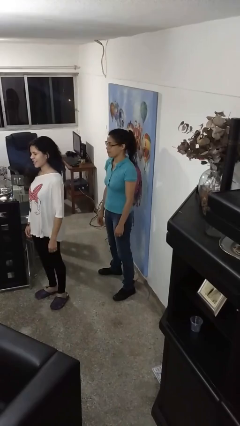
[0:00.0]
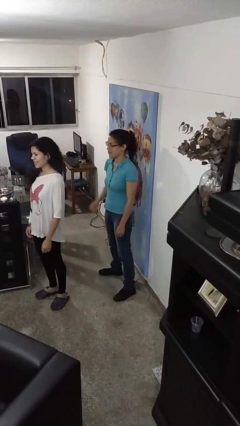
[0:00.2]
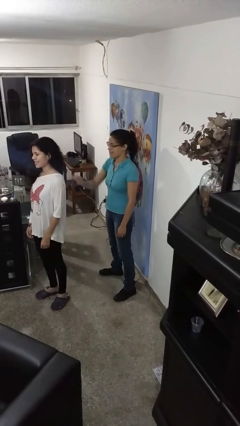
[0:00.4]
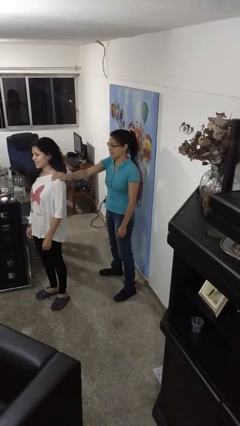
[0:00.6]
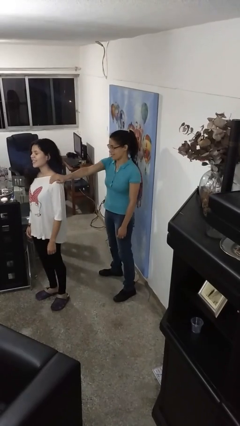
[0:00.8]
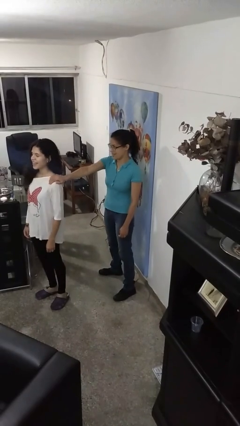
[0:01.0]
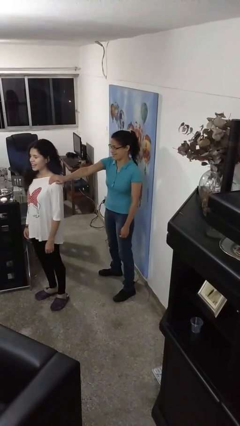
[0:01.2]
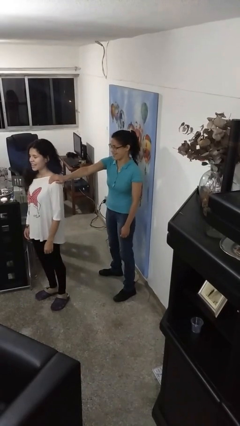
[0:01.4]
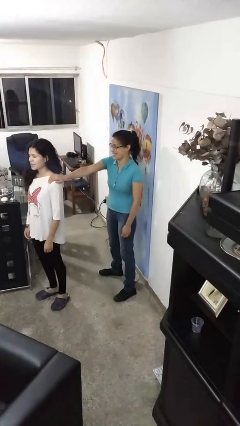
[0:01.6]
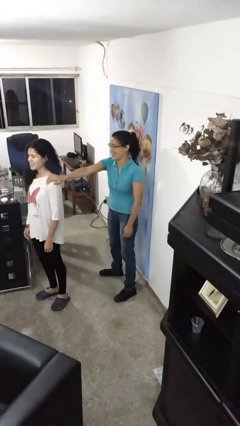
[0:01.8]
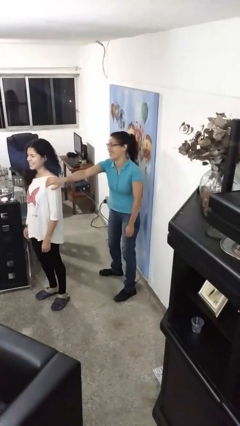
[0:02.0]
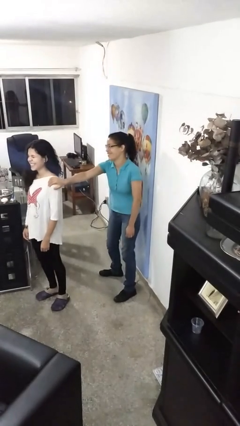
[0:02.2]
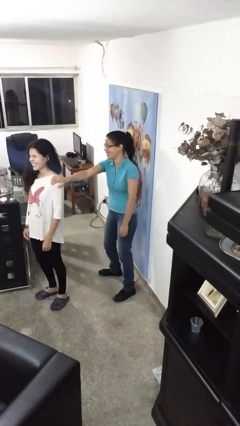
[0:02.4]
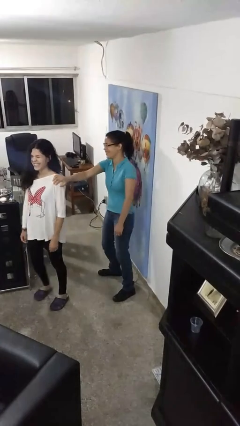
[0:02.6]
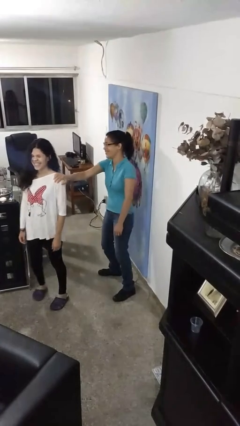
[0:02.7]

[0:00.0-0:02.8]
person grabs person by shoulder

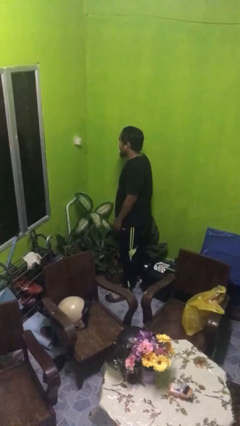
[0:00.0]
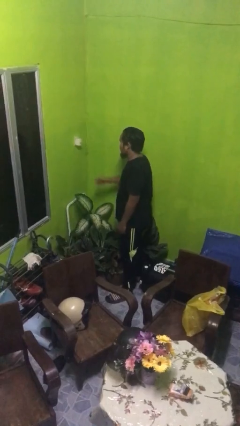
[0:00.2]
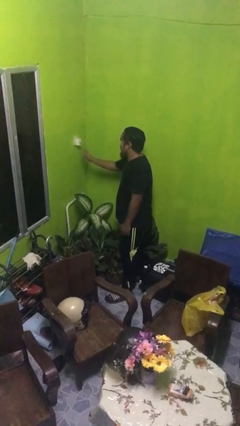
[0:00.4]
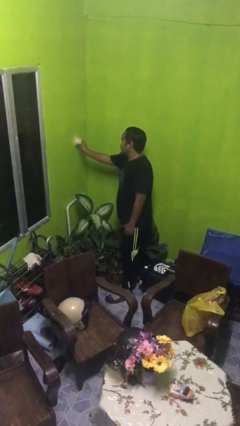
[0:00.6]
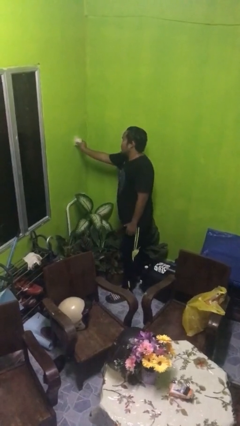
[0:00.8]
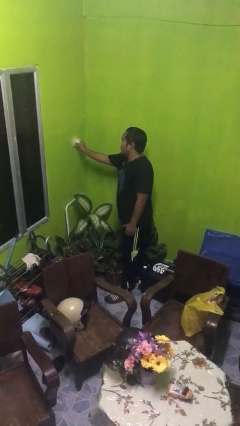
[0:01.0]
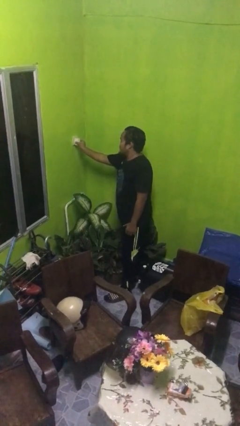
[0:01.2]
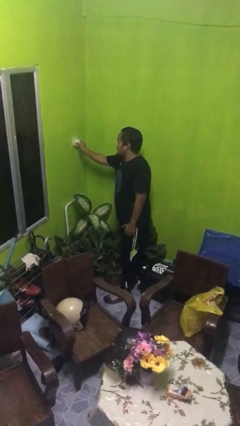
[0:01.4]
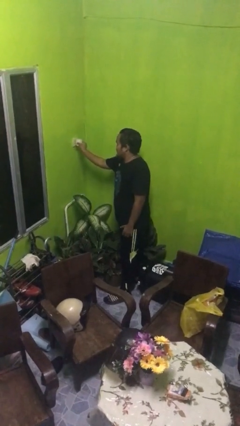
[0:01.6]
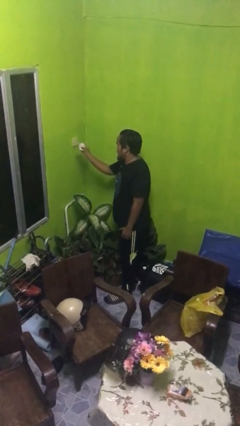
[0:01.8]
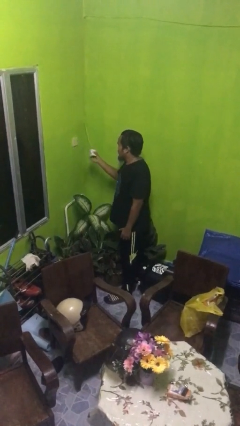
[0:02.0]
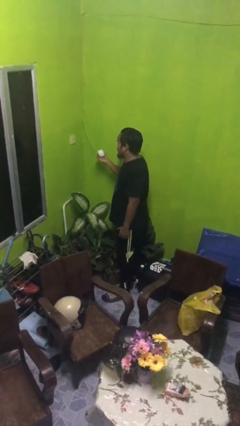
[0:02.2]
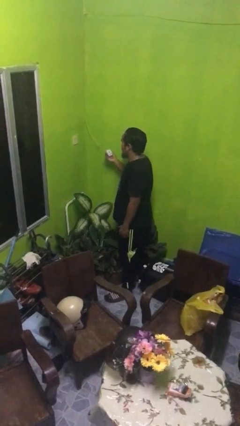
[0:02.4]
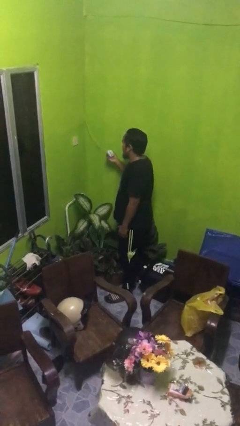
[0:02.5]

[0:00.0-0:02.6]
person unplugs from electrical socket

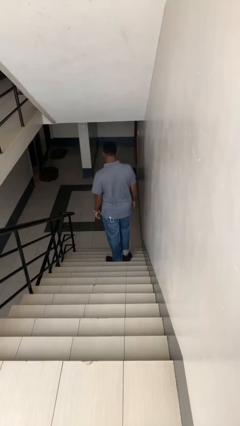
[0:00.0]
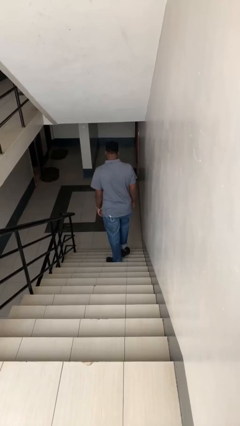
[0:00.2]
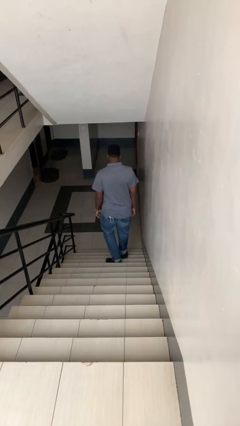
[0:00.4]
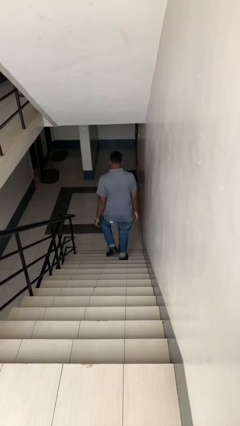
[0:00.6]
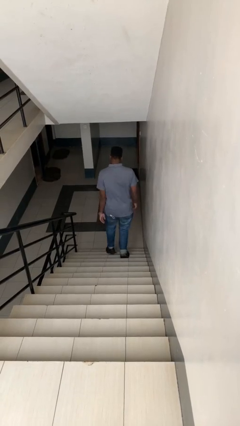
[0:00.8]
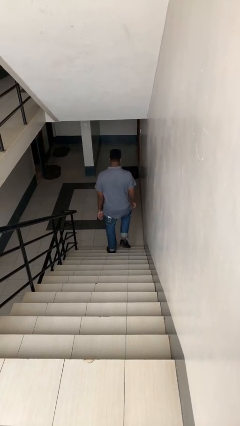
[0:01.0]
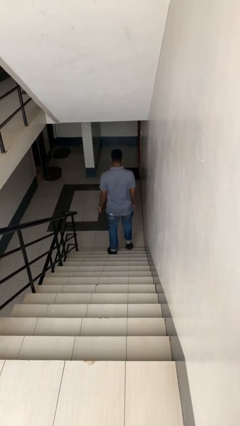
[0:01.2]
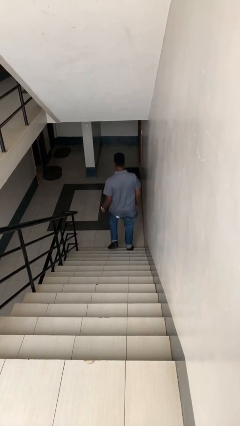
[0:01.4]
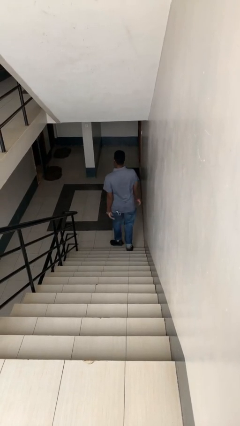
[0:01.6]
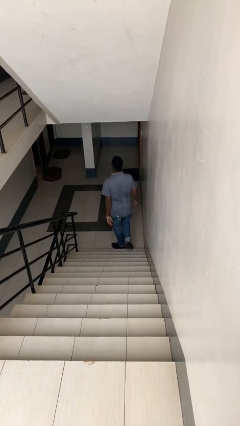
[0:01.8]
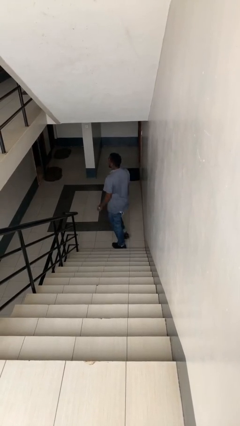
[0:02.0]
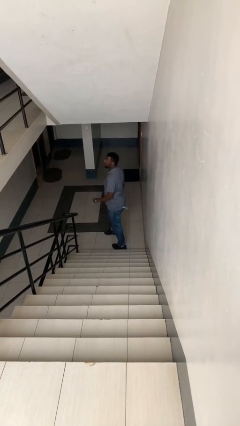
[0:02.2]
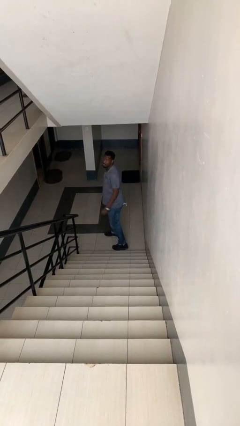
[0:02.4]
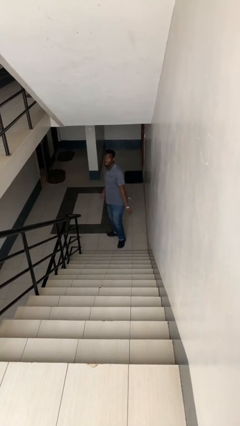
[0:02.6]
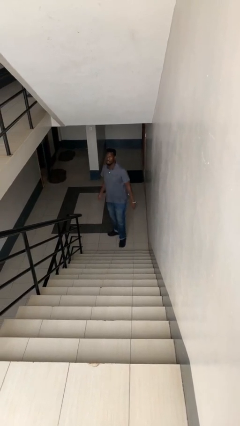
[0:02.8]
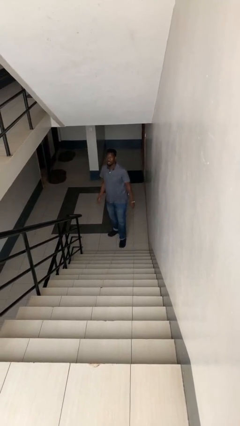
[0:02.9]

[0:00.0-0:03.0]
person climbs down stairs

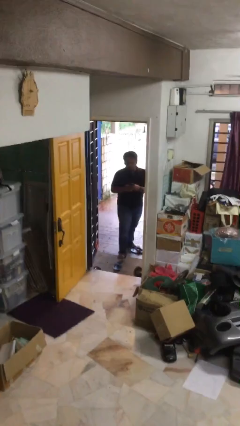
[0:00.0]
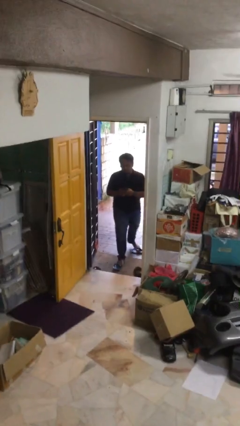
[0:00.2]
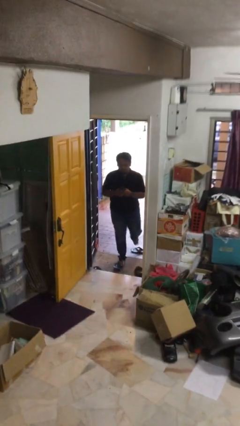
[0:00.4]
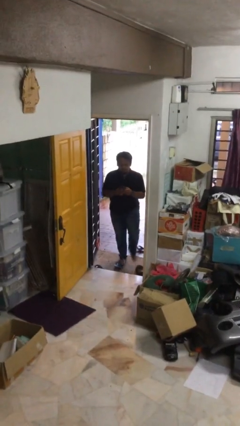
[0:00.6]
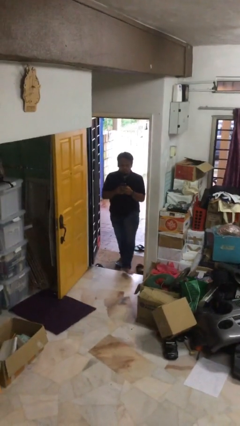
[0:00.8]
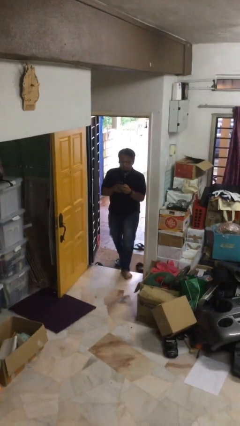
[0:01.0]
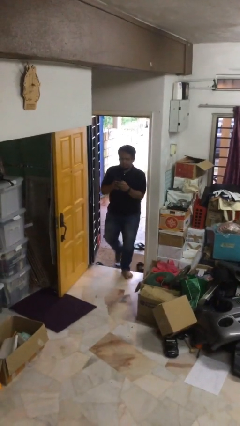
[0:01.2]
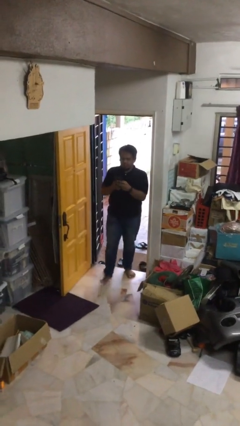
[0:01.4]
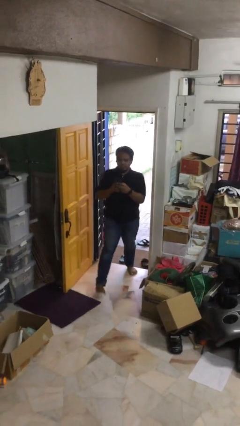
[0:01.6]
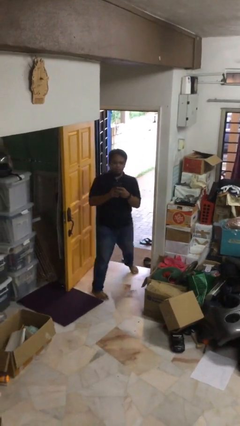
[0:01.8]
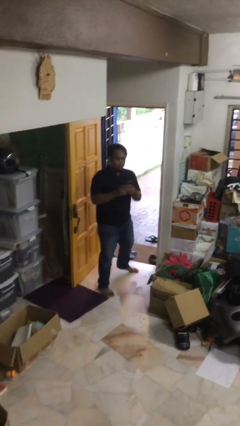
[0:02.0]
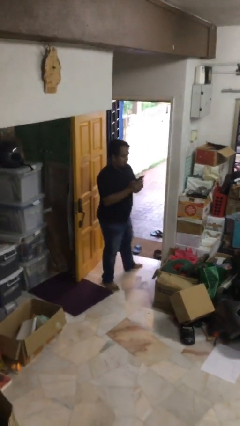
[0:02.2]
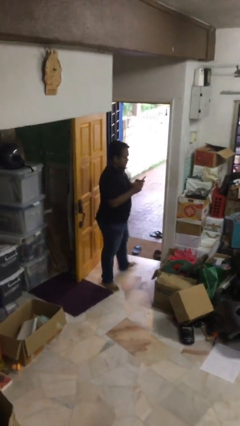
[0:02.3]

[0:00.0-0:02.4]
person enters scene through structure

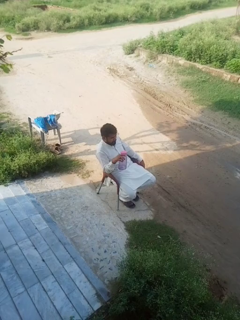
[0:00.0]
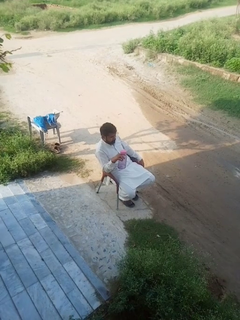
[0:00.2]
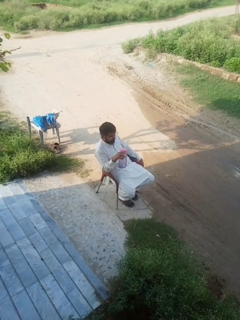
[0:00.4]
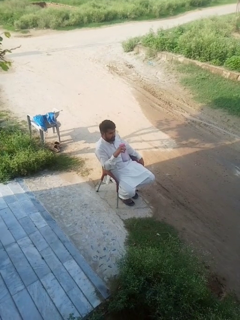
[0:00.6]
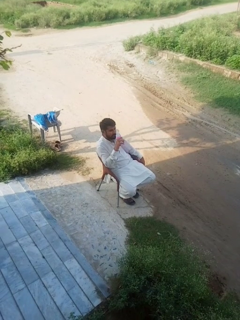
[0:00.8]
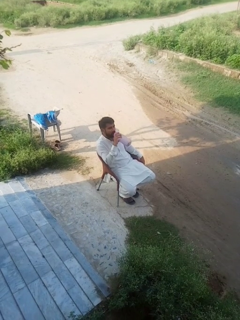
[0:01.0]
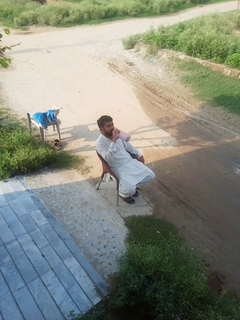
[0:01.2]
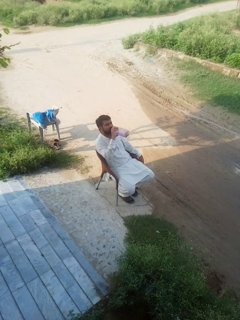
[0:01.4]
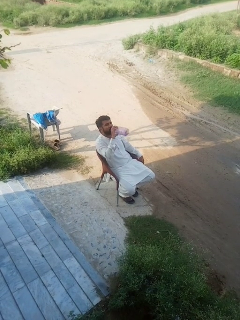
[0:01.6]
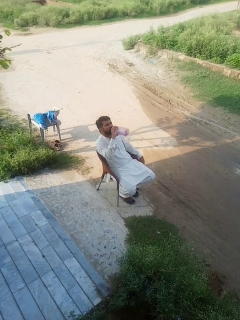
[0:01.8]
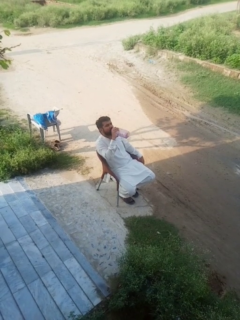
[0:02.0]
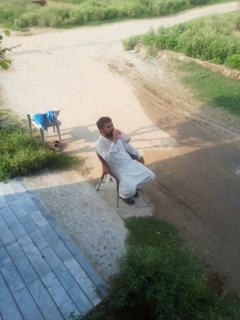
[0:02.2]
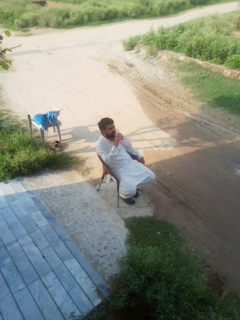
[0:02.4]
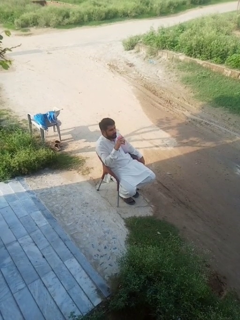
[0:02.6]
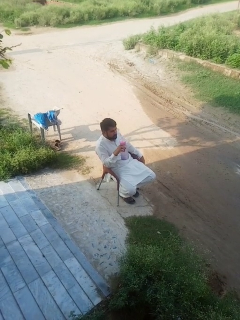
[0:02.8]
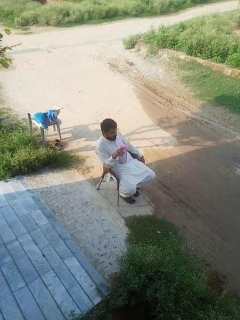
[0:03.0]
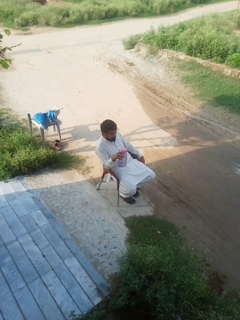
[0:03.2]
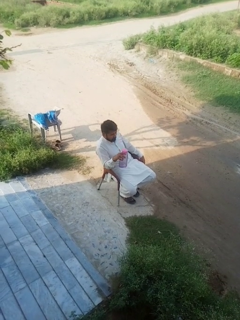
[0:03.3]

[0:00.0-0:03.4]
person drinks from bottle

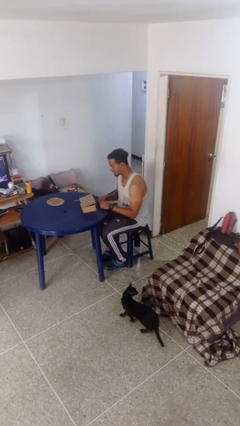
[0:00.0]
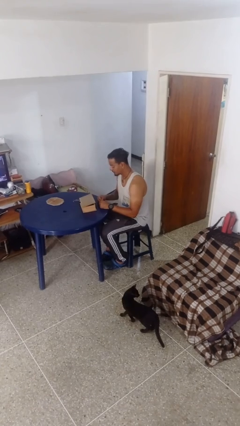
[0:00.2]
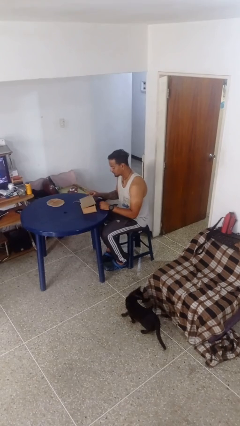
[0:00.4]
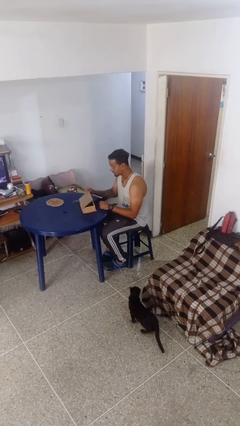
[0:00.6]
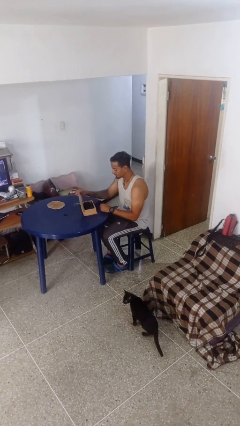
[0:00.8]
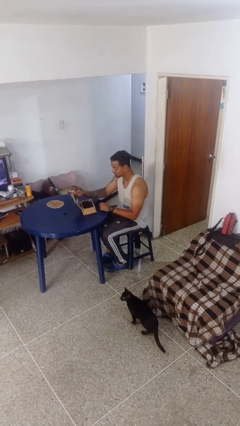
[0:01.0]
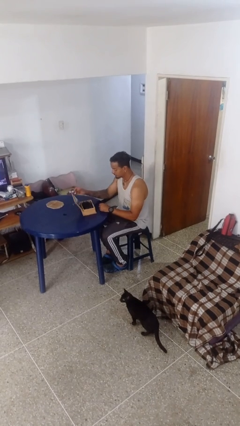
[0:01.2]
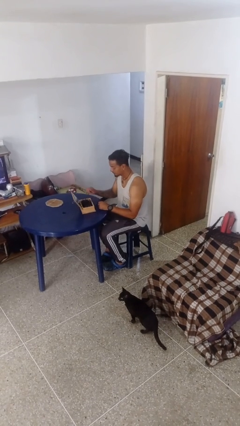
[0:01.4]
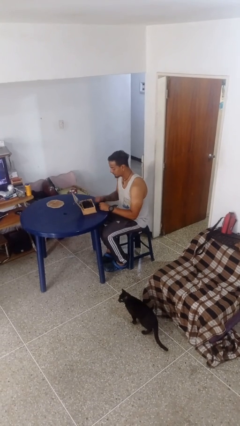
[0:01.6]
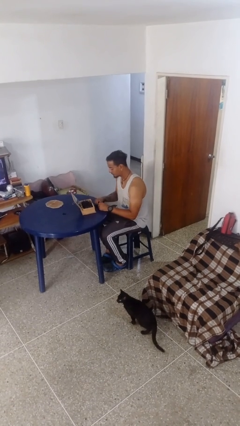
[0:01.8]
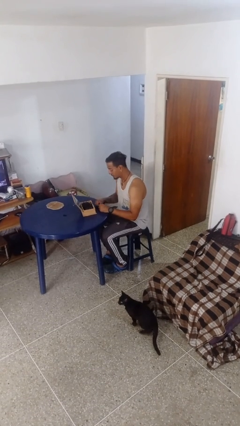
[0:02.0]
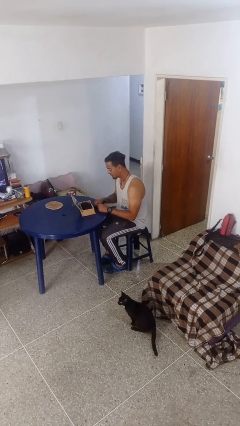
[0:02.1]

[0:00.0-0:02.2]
person opens jewelry box

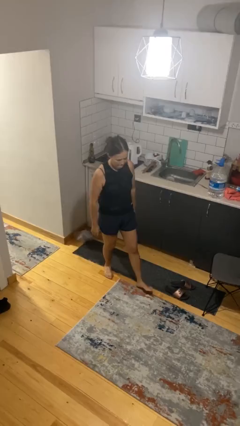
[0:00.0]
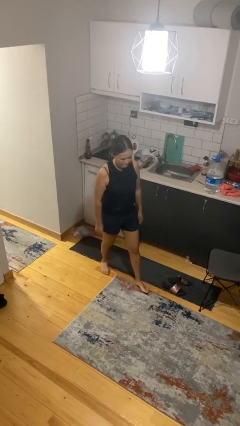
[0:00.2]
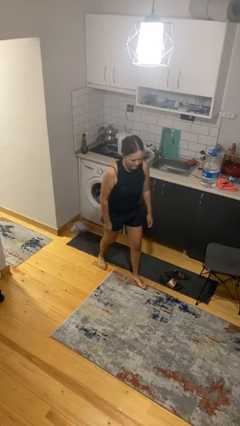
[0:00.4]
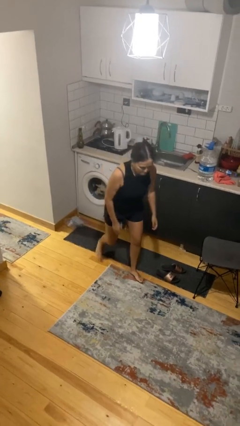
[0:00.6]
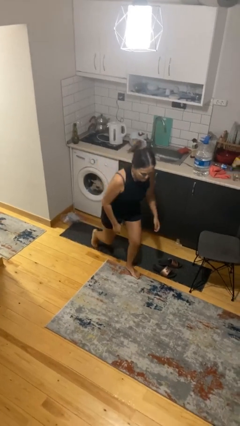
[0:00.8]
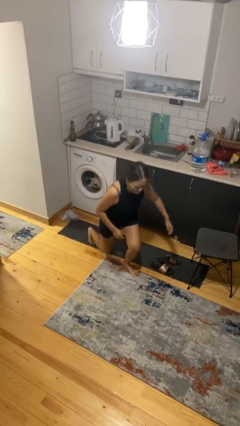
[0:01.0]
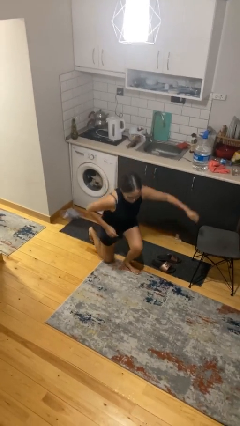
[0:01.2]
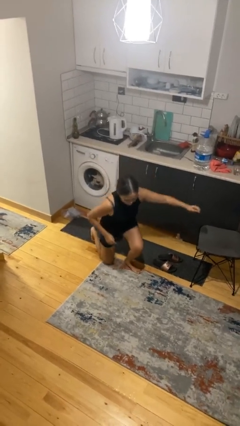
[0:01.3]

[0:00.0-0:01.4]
person kneels
